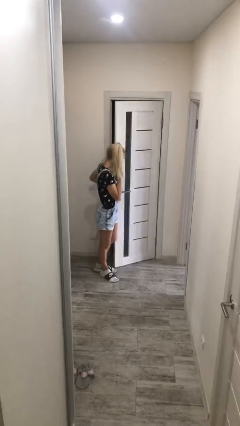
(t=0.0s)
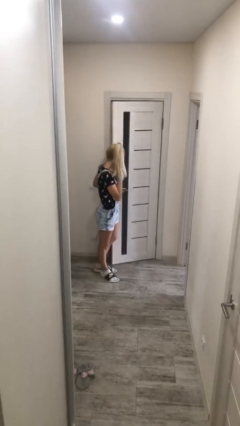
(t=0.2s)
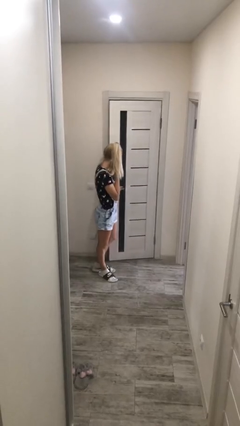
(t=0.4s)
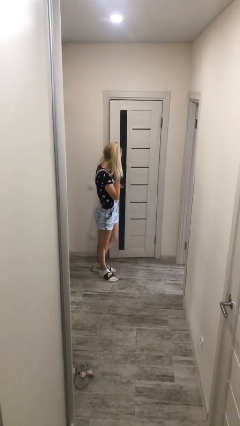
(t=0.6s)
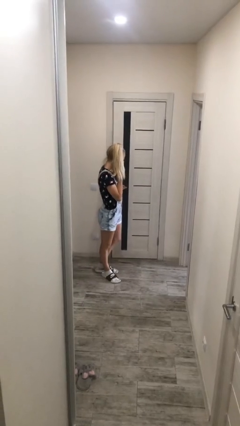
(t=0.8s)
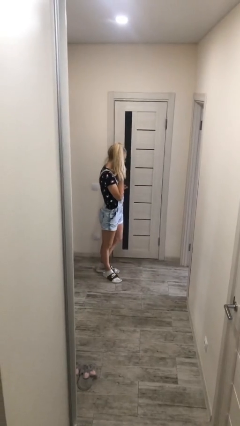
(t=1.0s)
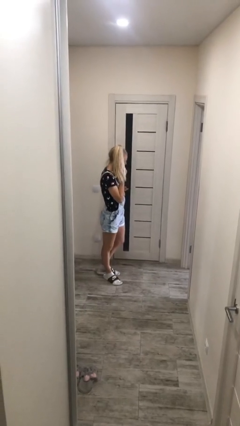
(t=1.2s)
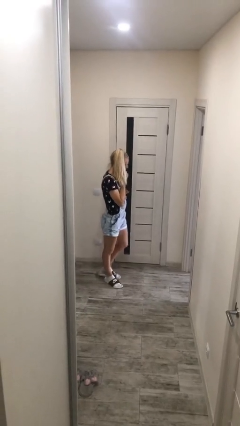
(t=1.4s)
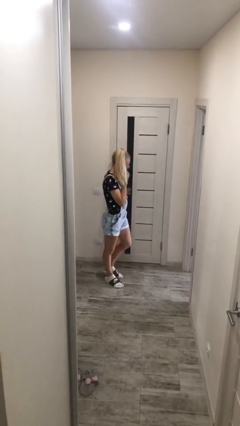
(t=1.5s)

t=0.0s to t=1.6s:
person closes facility door

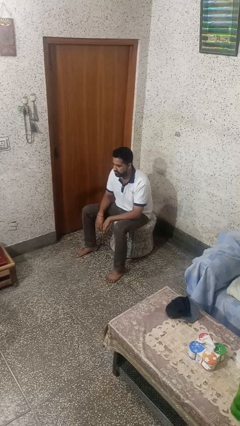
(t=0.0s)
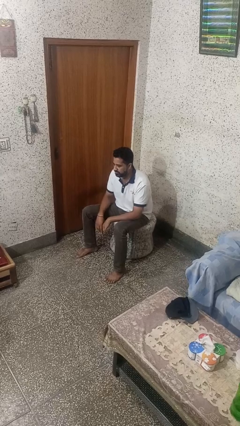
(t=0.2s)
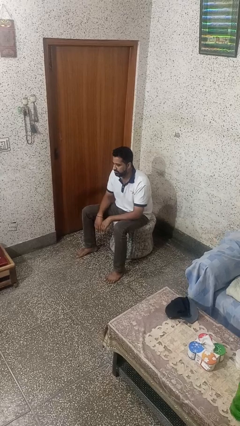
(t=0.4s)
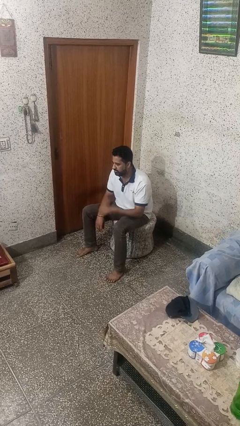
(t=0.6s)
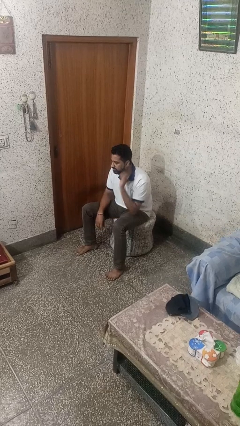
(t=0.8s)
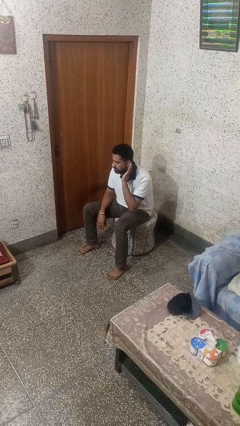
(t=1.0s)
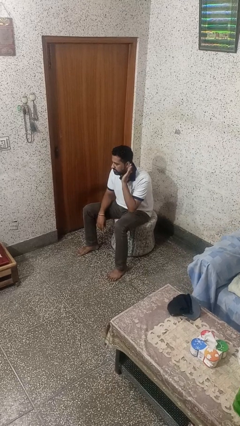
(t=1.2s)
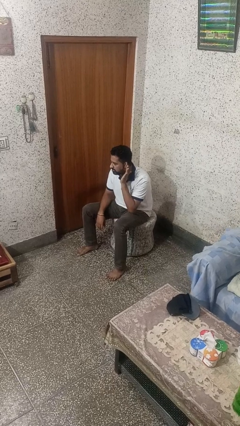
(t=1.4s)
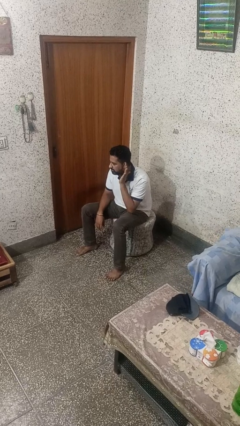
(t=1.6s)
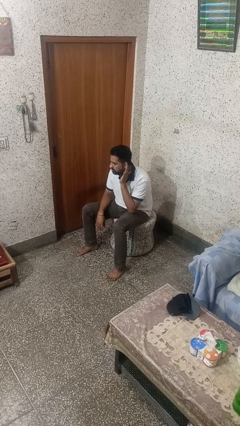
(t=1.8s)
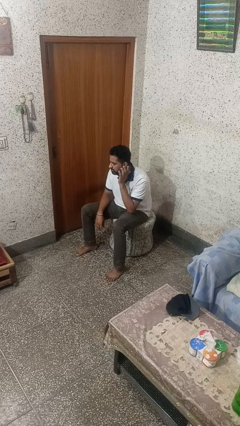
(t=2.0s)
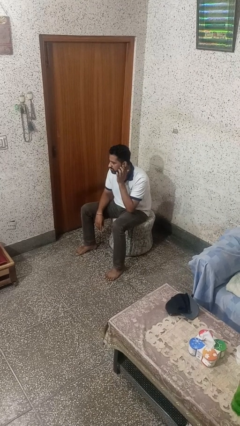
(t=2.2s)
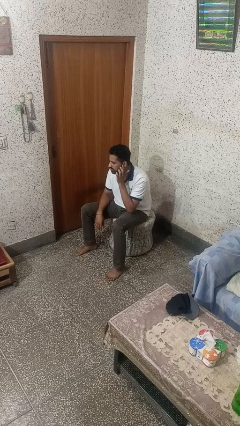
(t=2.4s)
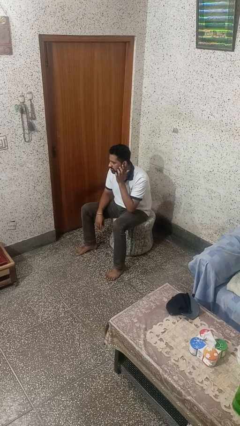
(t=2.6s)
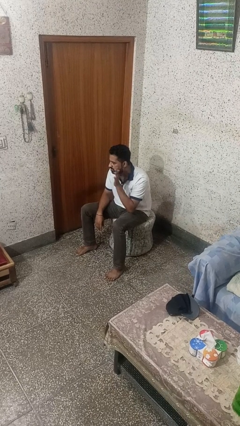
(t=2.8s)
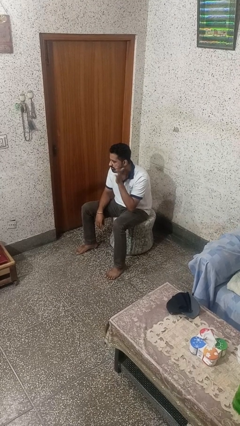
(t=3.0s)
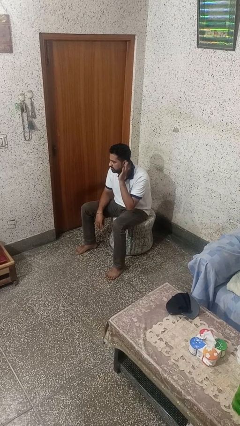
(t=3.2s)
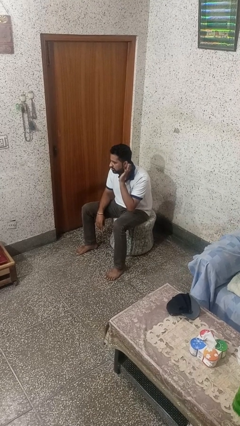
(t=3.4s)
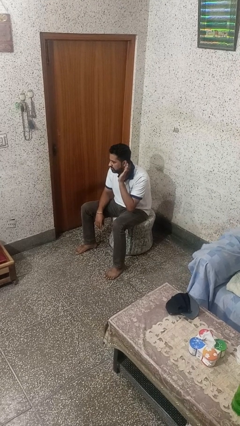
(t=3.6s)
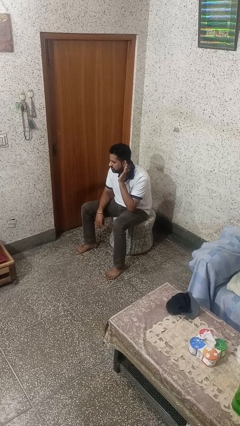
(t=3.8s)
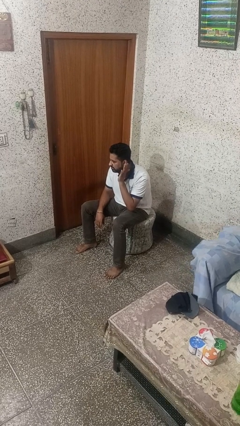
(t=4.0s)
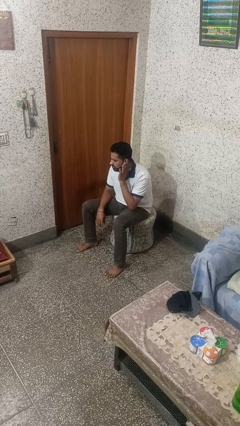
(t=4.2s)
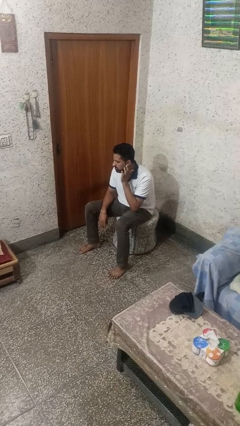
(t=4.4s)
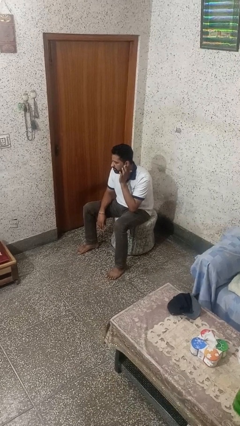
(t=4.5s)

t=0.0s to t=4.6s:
person gestures listen closely

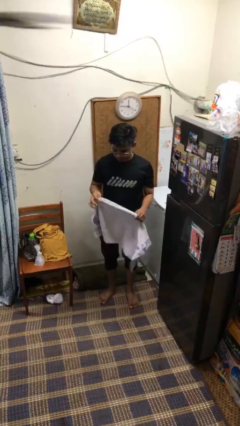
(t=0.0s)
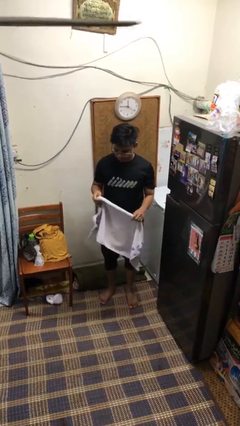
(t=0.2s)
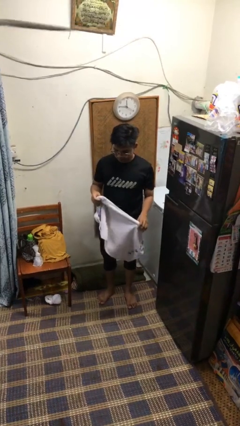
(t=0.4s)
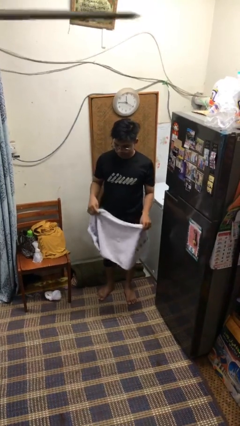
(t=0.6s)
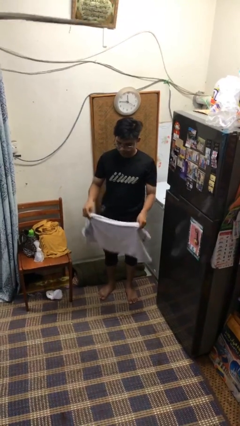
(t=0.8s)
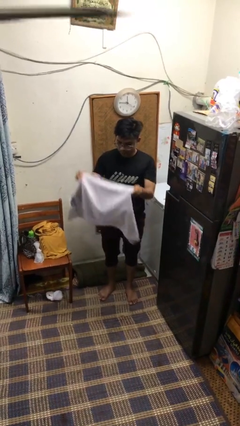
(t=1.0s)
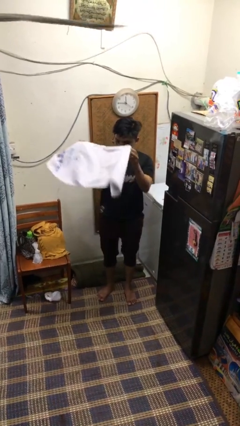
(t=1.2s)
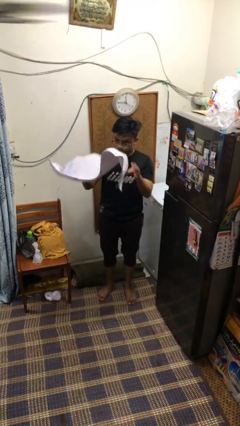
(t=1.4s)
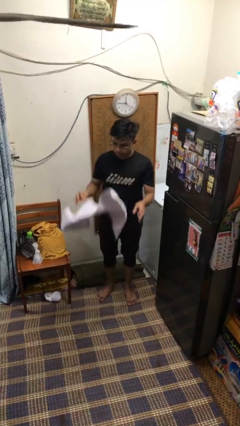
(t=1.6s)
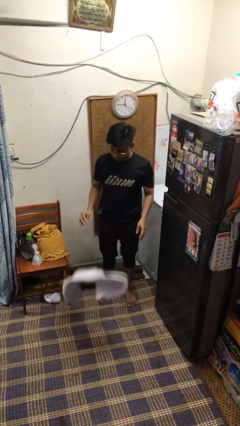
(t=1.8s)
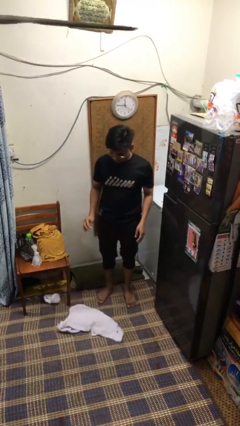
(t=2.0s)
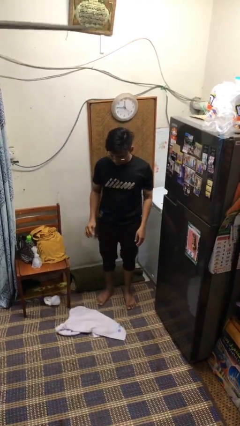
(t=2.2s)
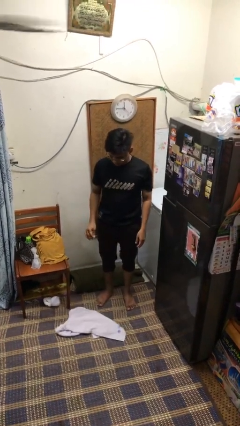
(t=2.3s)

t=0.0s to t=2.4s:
person throws object into air

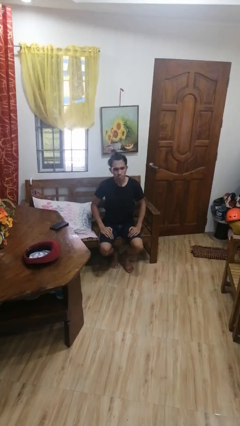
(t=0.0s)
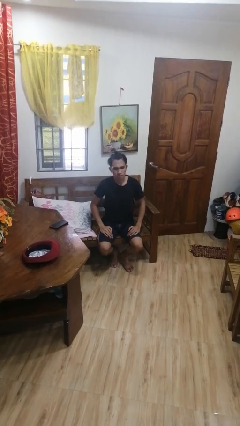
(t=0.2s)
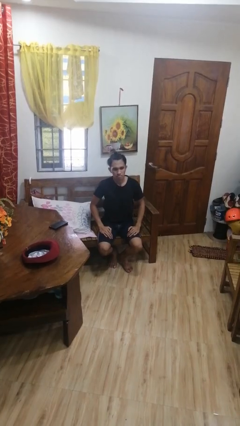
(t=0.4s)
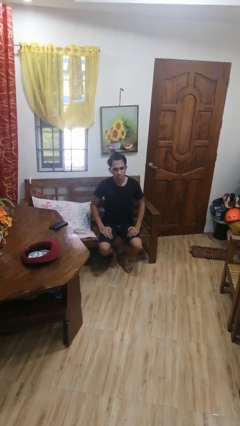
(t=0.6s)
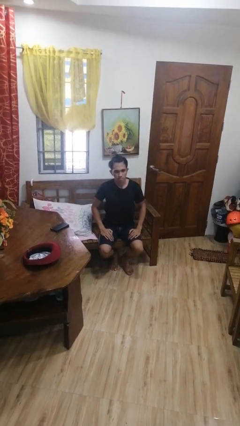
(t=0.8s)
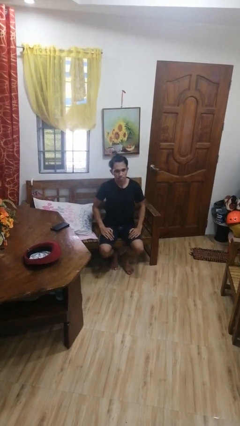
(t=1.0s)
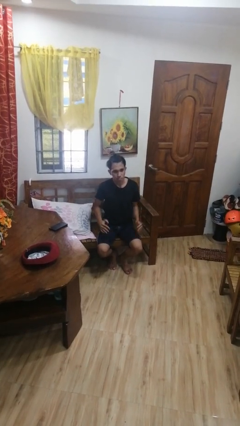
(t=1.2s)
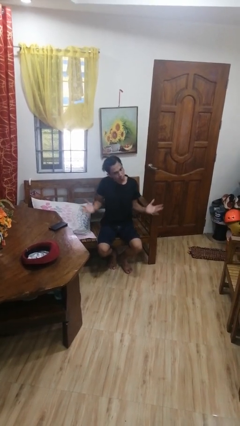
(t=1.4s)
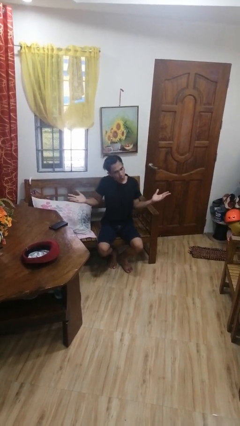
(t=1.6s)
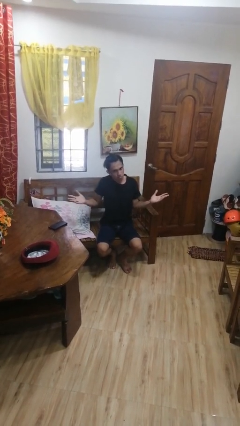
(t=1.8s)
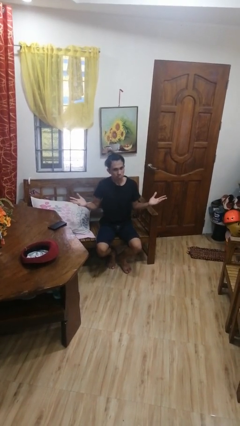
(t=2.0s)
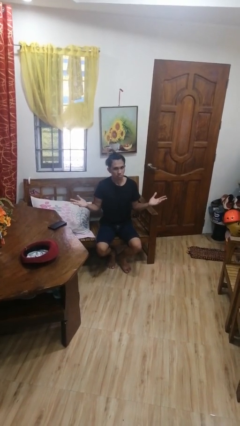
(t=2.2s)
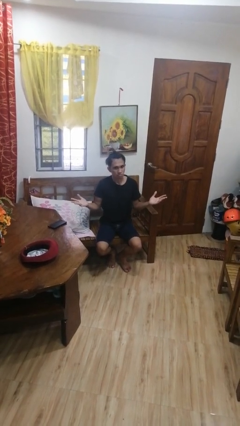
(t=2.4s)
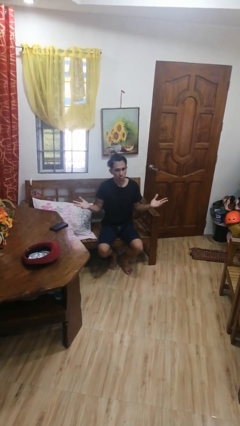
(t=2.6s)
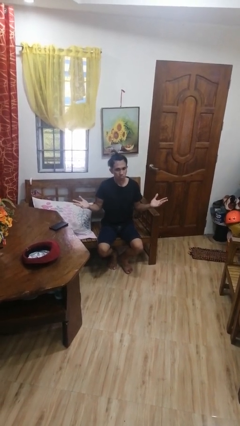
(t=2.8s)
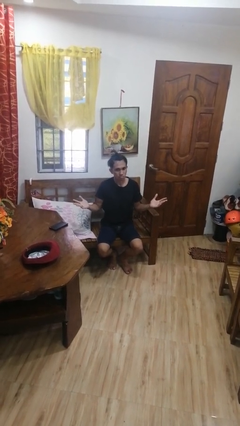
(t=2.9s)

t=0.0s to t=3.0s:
person shrugs

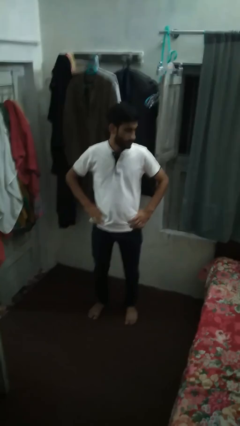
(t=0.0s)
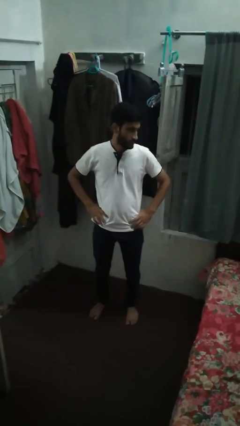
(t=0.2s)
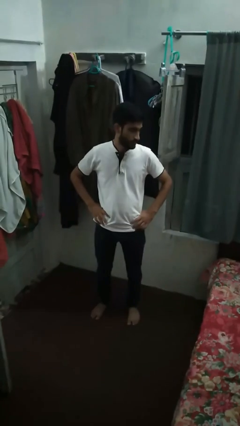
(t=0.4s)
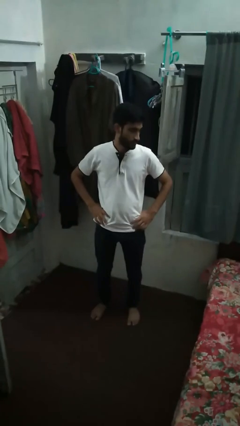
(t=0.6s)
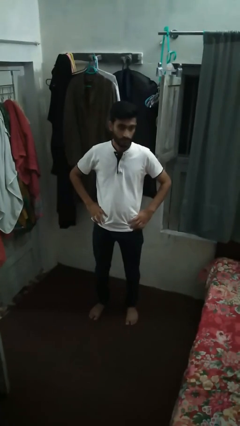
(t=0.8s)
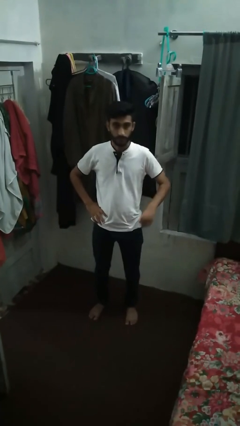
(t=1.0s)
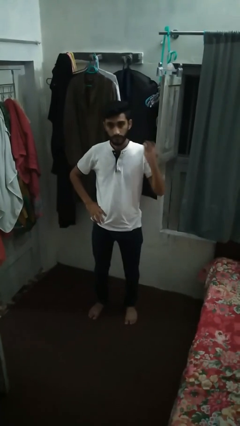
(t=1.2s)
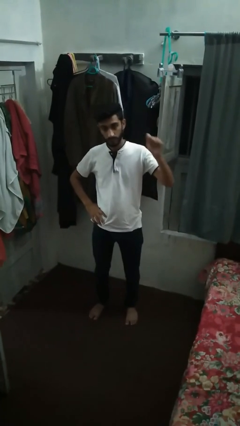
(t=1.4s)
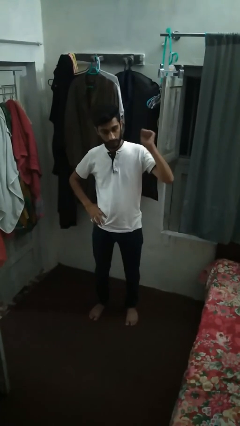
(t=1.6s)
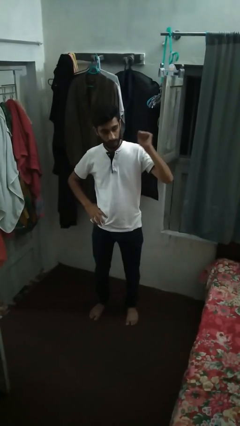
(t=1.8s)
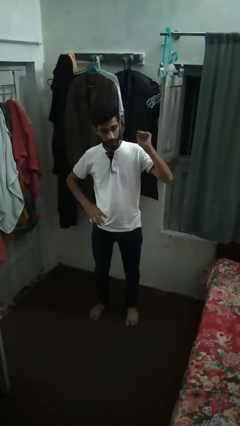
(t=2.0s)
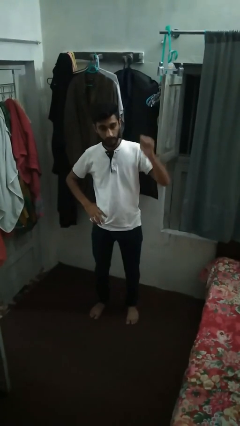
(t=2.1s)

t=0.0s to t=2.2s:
person gestures behind me

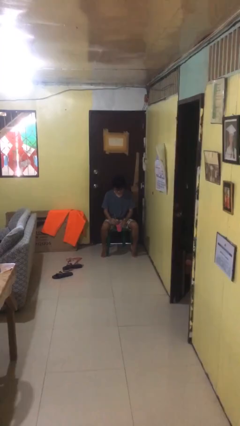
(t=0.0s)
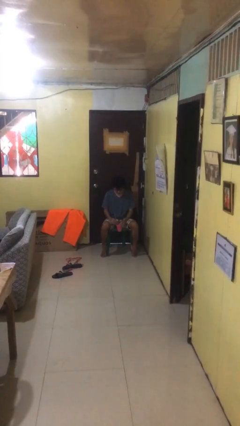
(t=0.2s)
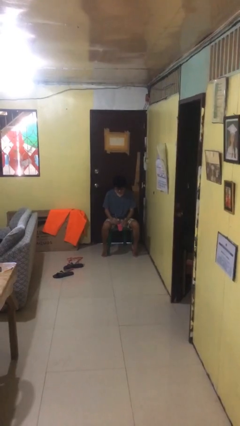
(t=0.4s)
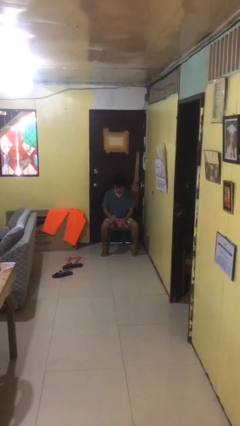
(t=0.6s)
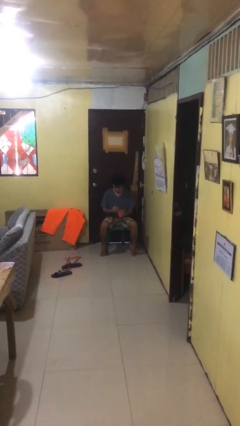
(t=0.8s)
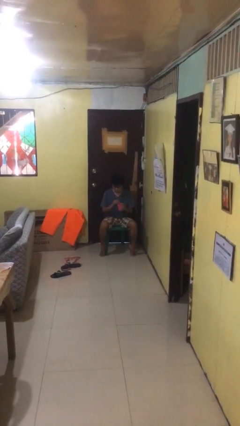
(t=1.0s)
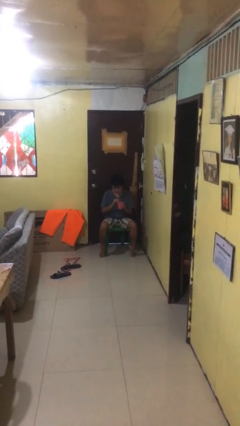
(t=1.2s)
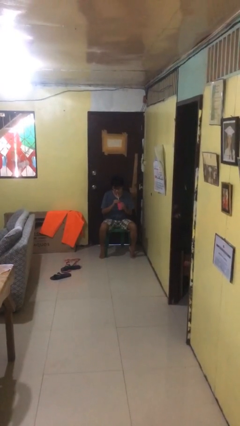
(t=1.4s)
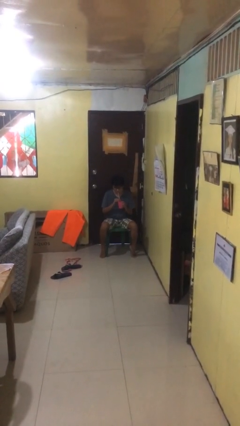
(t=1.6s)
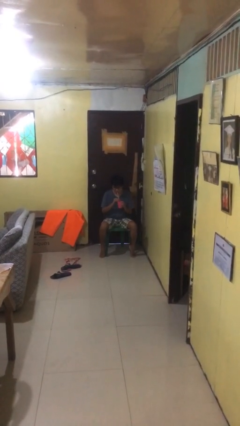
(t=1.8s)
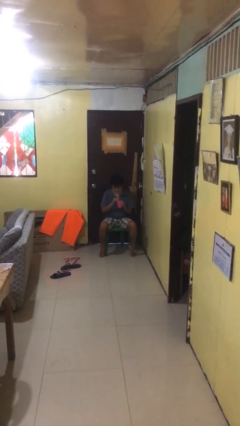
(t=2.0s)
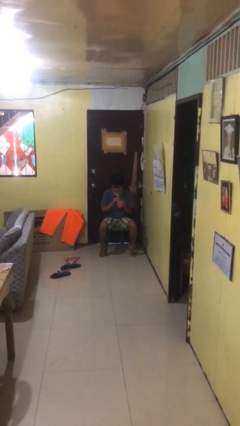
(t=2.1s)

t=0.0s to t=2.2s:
person drinks from straw

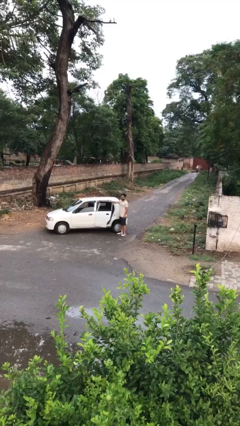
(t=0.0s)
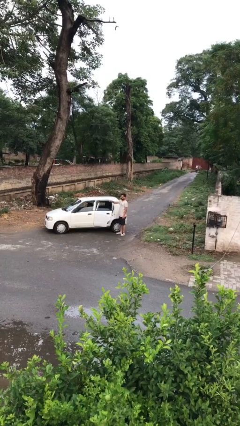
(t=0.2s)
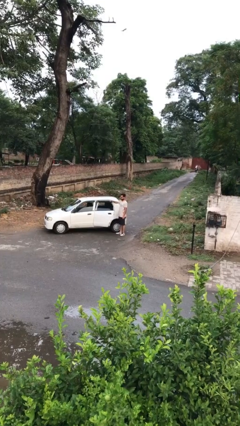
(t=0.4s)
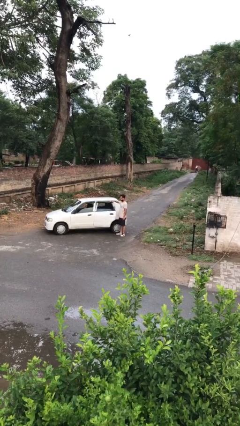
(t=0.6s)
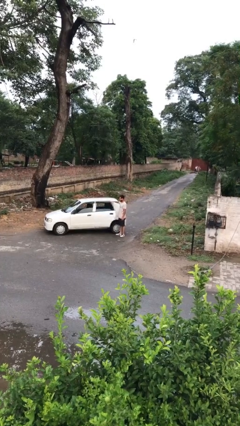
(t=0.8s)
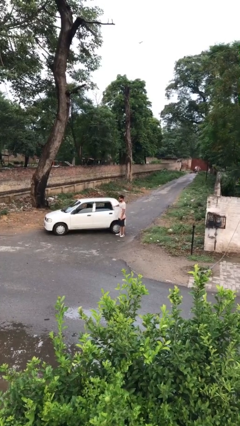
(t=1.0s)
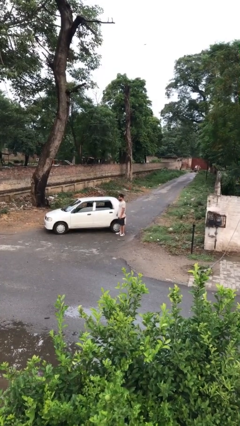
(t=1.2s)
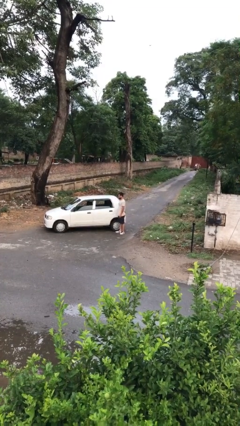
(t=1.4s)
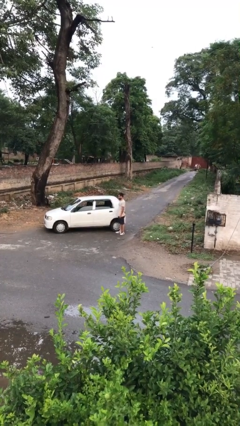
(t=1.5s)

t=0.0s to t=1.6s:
person closes car door
